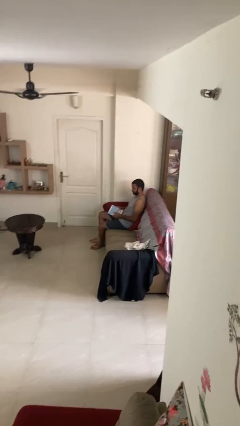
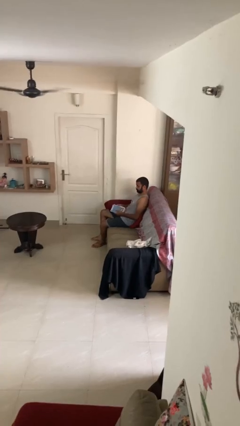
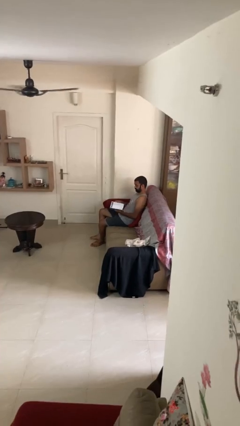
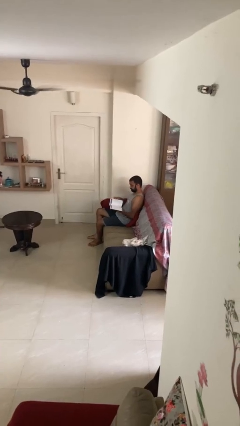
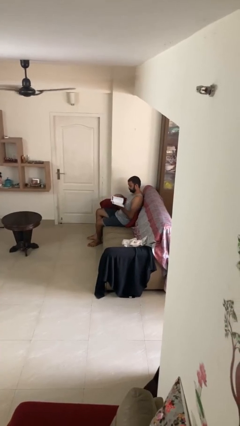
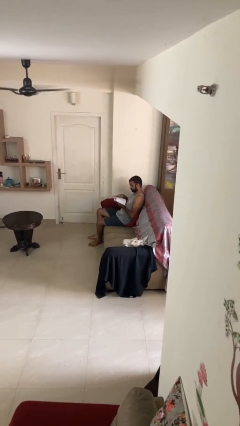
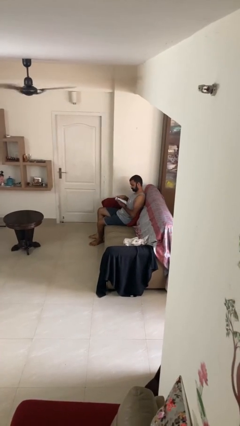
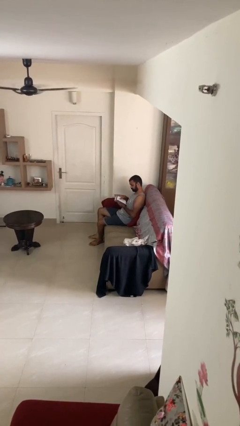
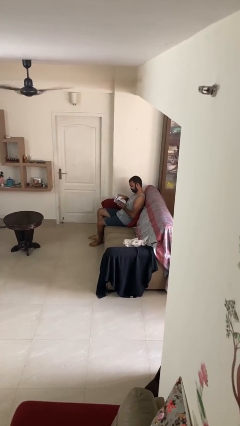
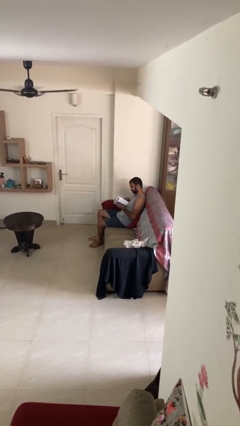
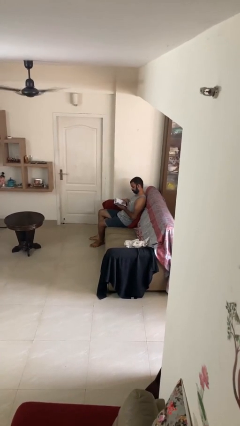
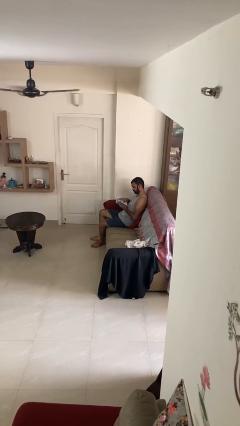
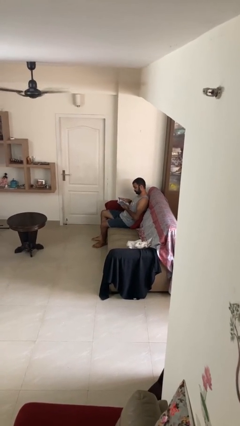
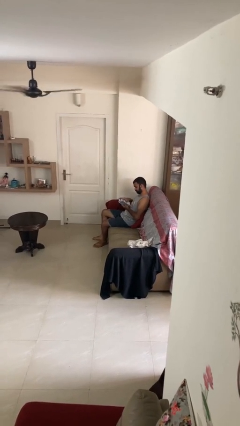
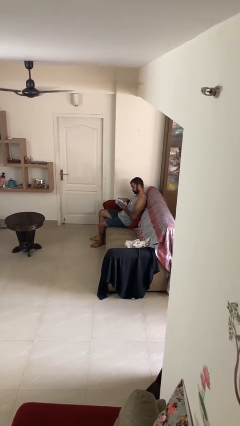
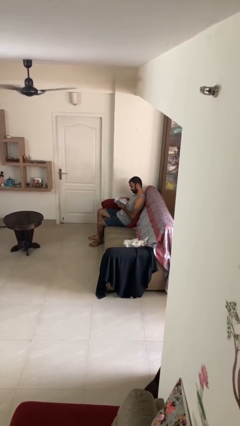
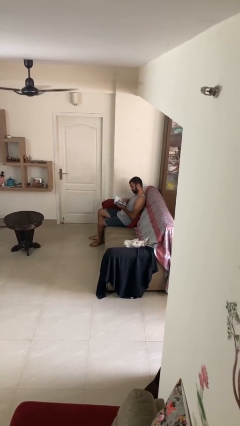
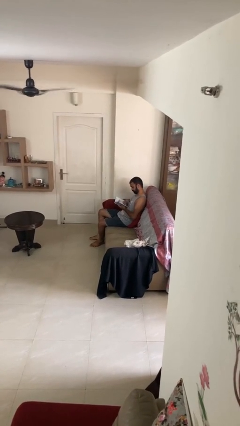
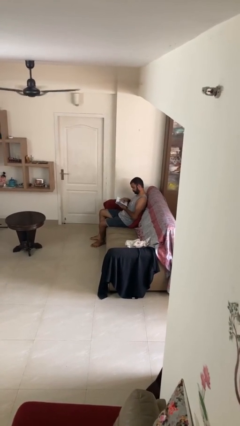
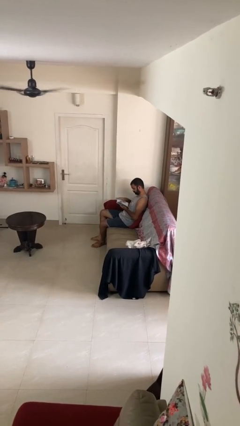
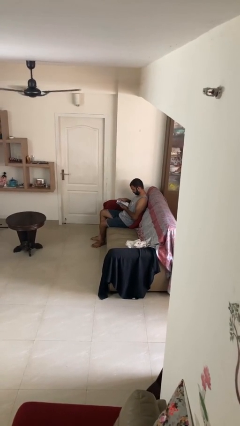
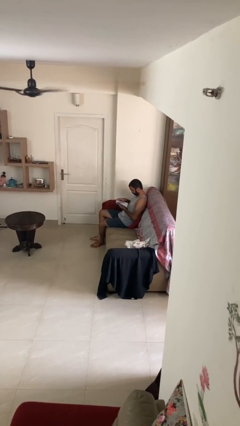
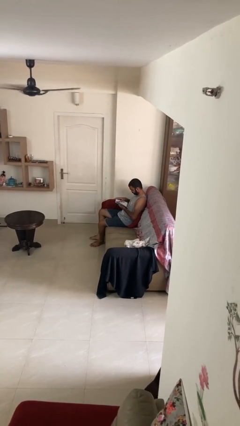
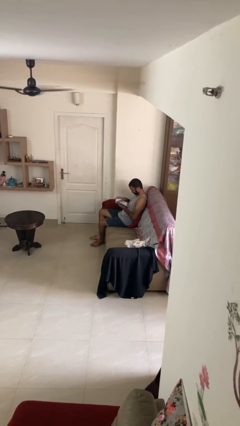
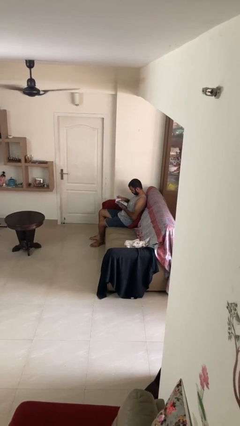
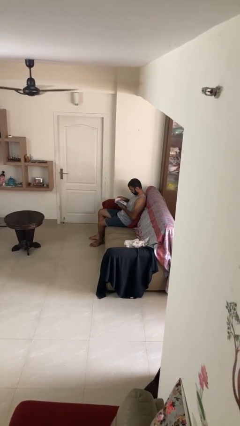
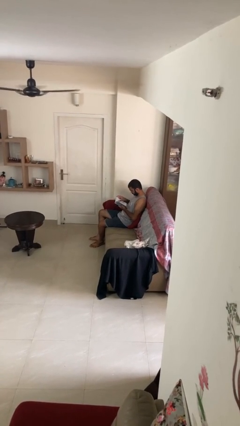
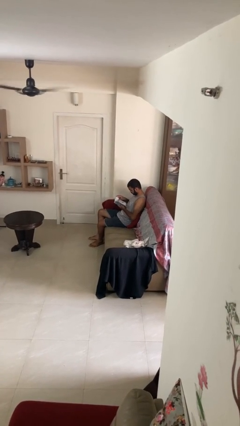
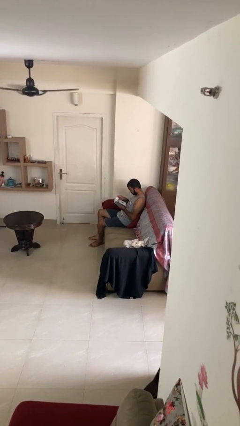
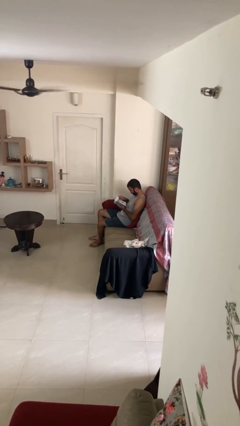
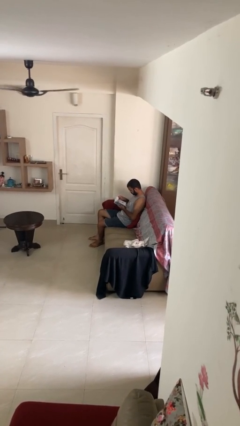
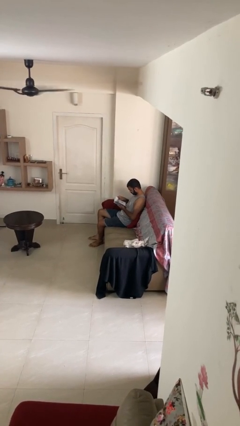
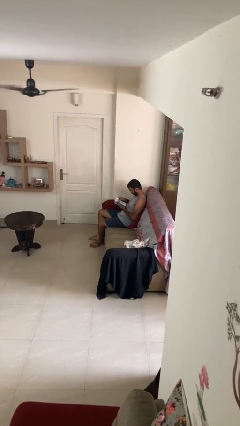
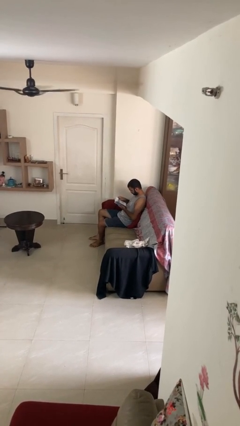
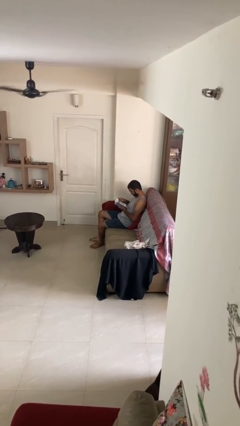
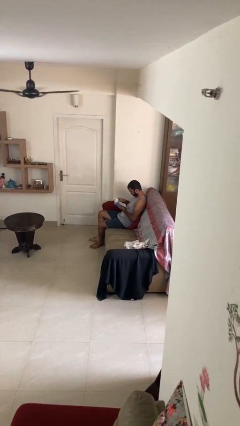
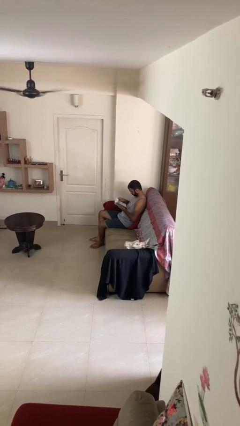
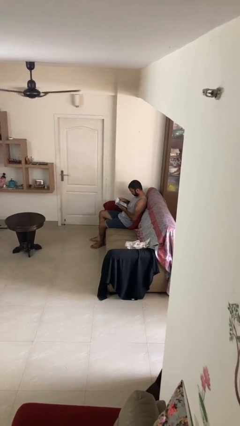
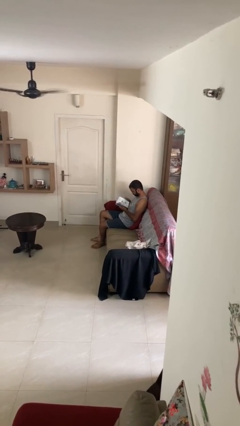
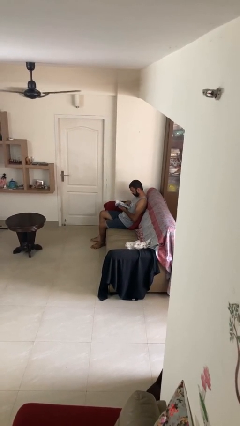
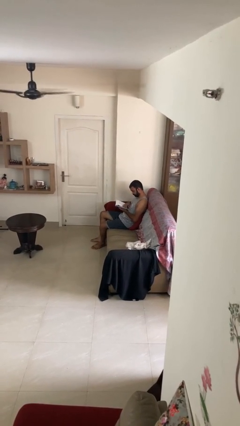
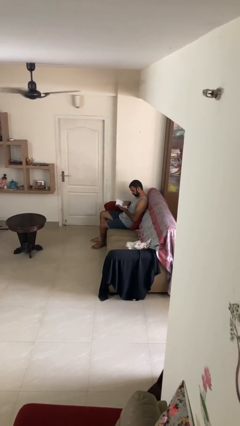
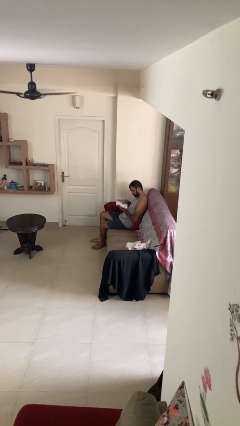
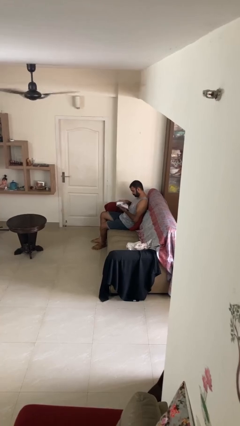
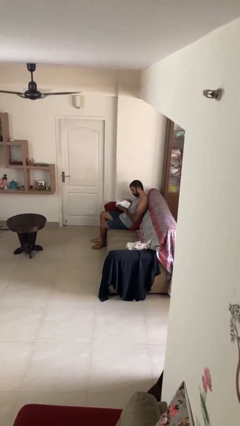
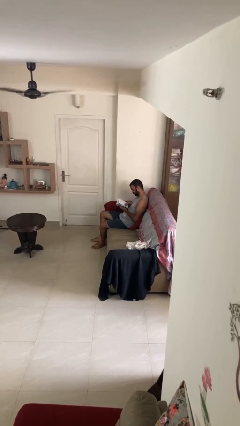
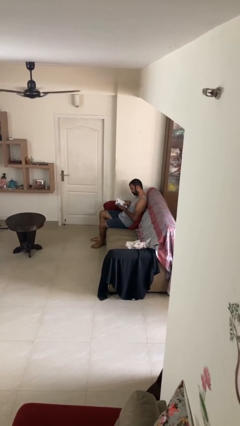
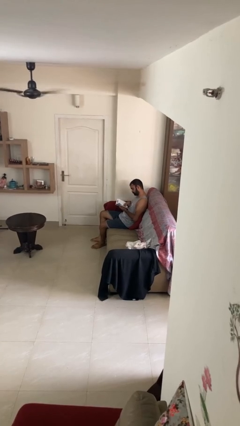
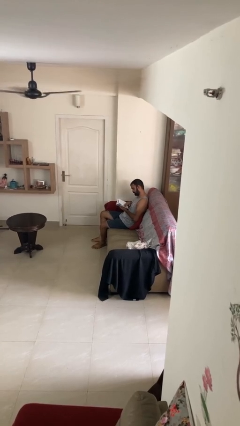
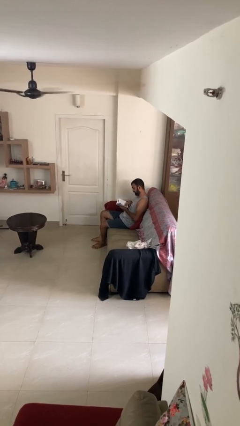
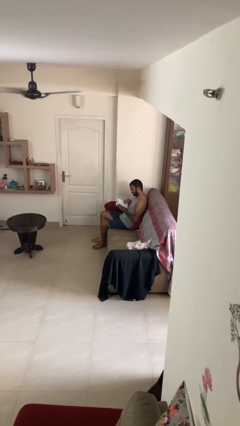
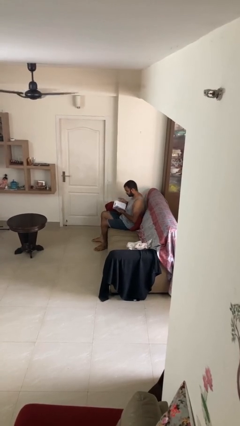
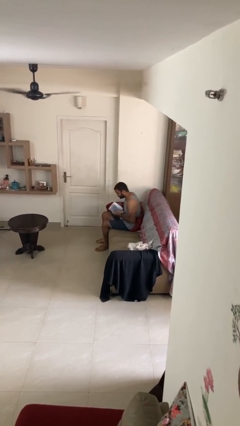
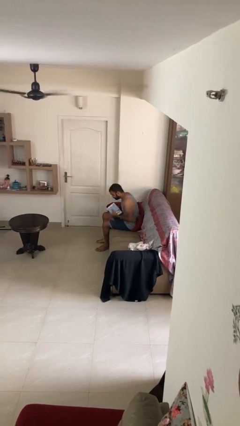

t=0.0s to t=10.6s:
person reads document

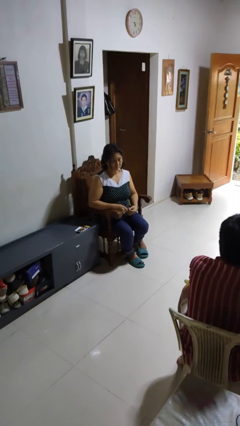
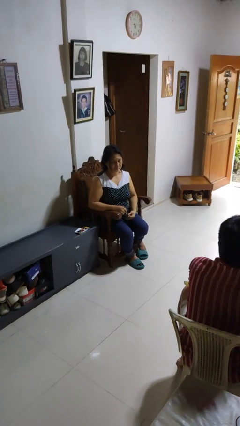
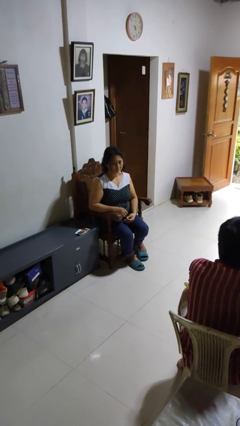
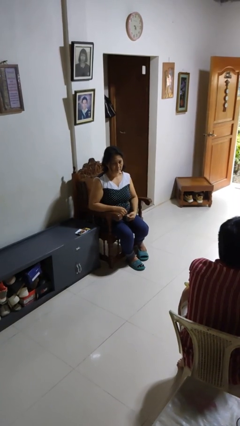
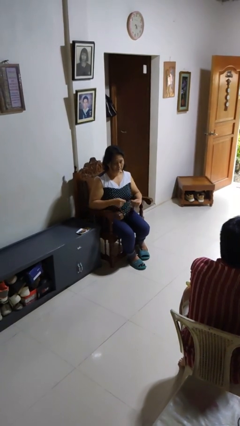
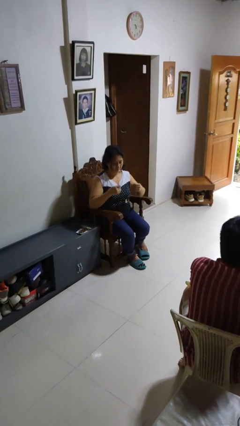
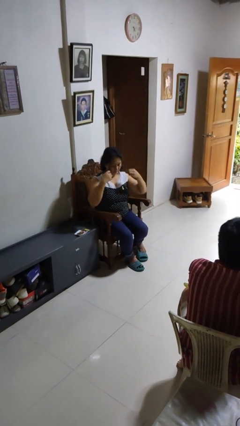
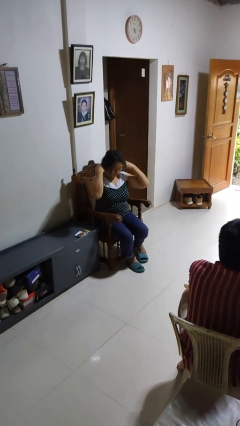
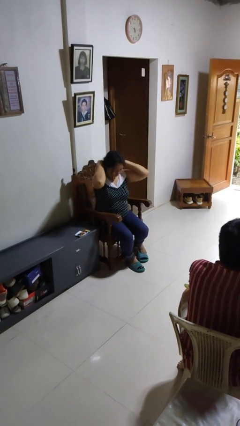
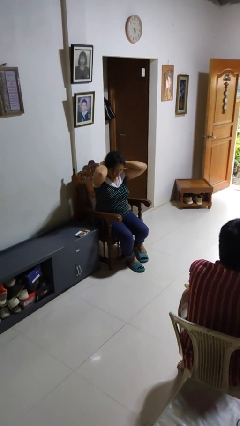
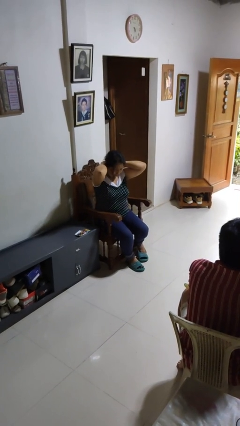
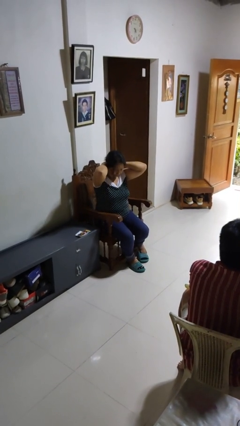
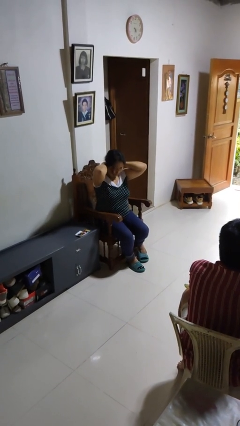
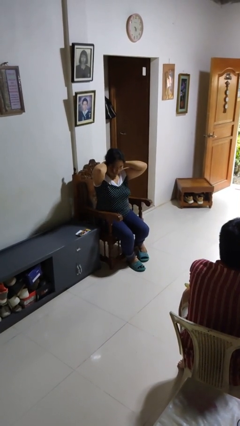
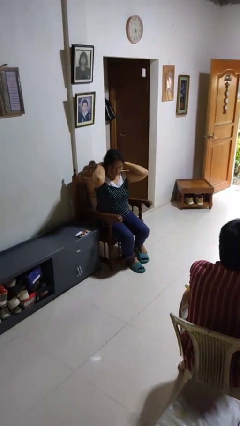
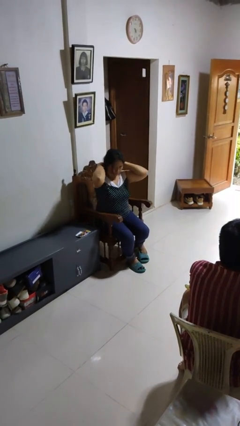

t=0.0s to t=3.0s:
person puts on necklace

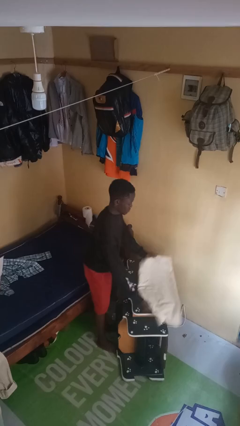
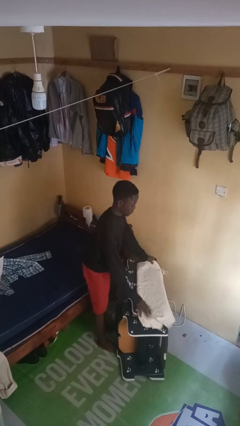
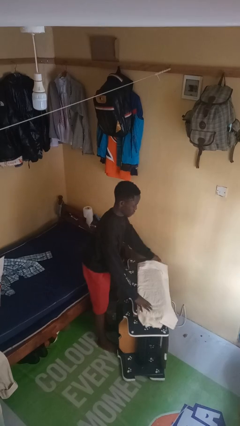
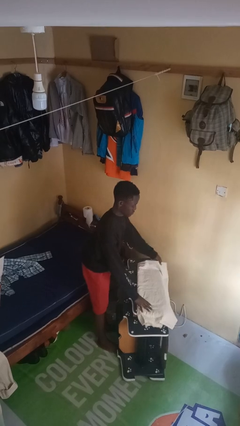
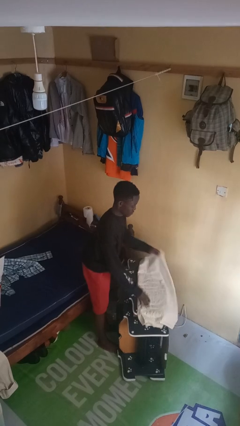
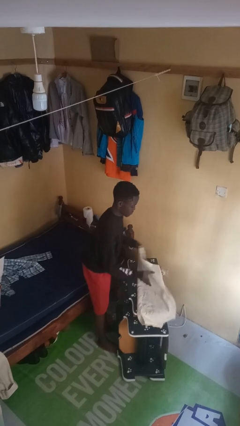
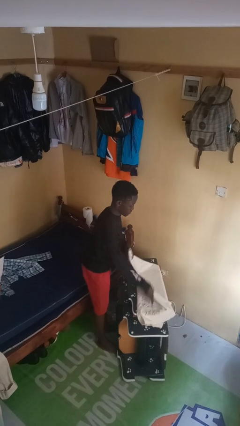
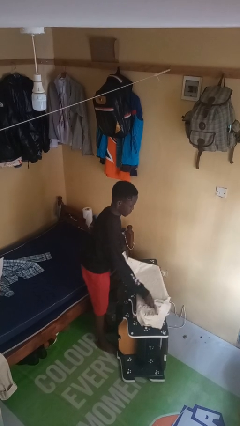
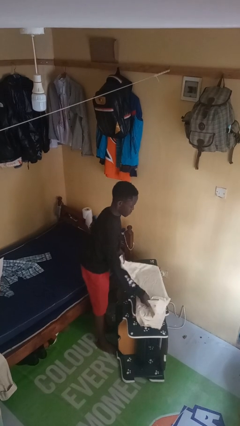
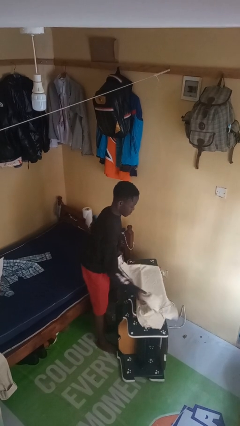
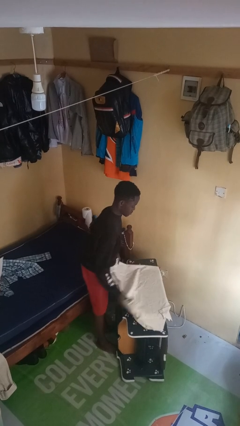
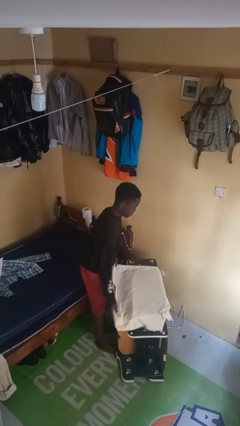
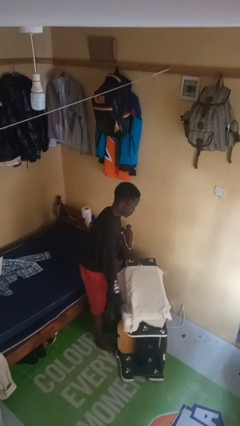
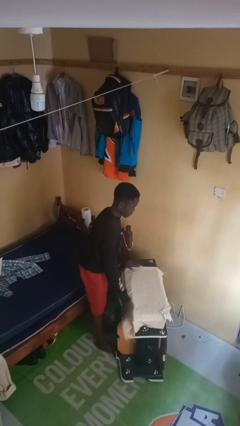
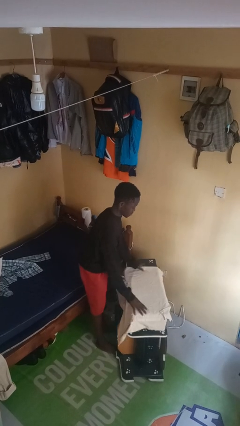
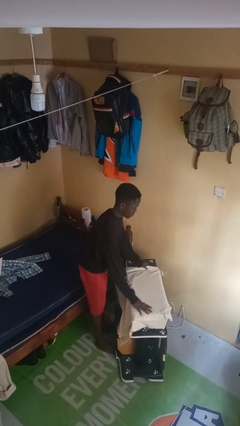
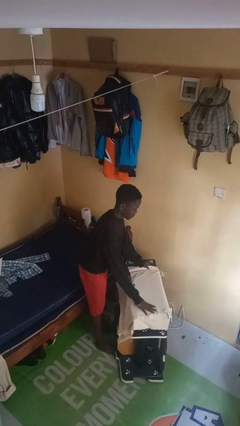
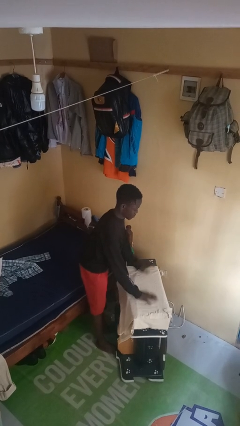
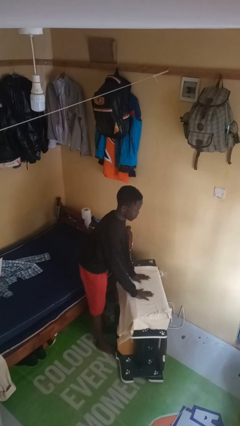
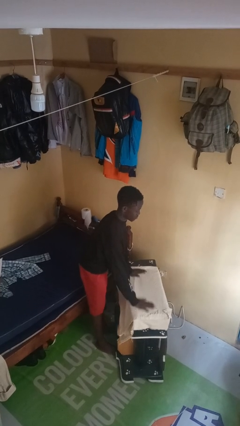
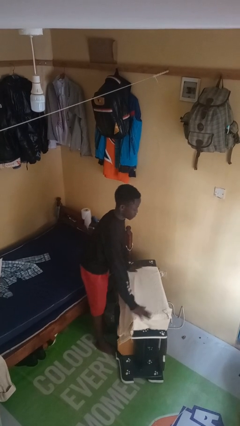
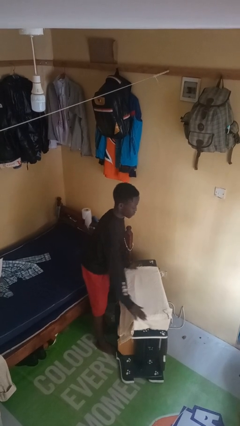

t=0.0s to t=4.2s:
person spreads tablecloth
